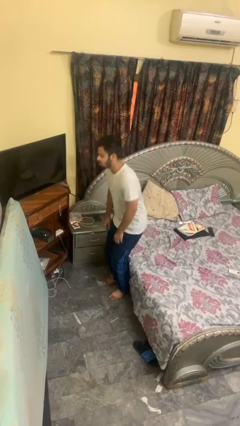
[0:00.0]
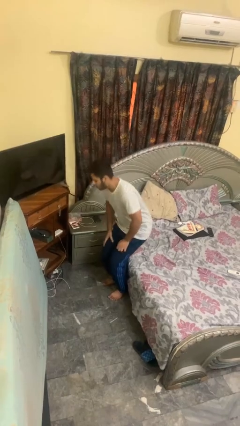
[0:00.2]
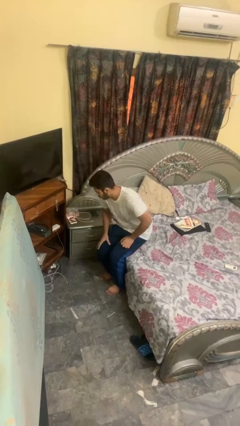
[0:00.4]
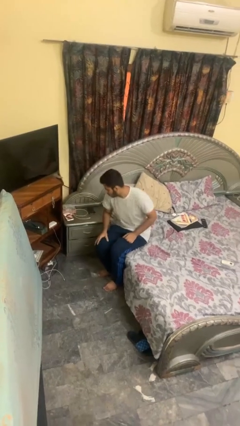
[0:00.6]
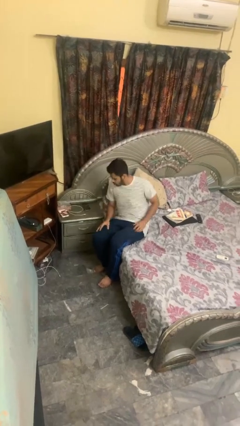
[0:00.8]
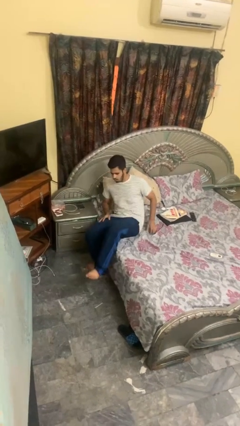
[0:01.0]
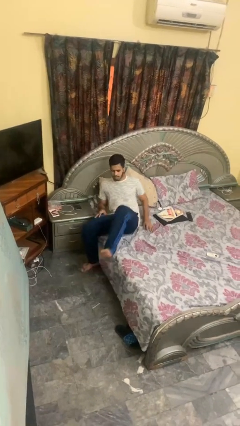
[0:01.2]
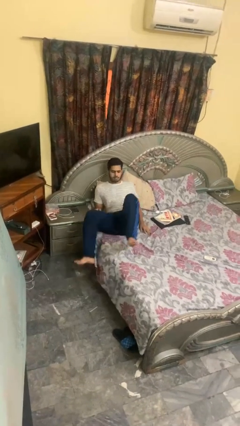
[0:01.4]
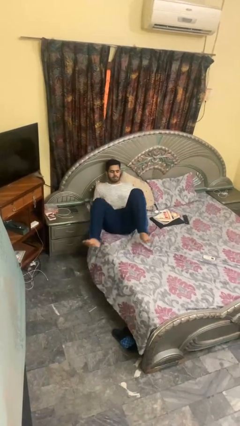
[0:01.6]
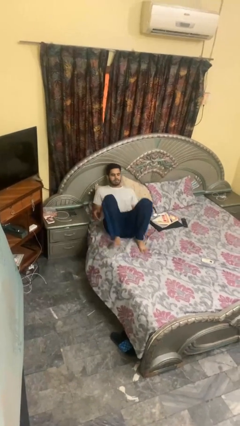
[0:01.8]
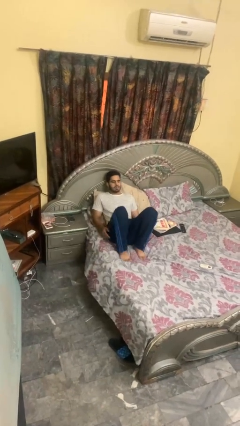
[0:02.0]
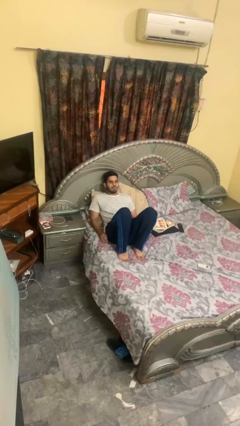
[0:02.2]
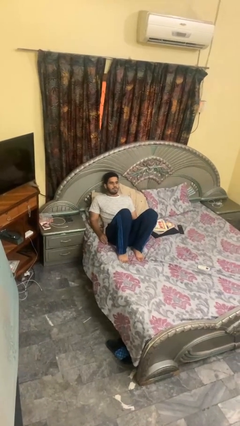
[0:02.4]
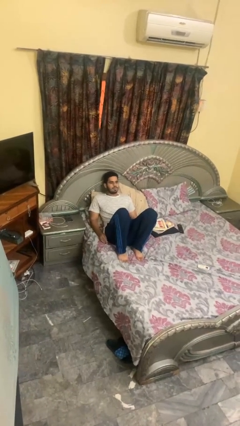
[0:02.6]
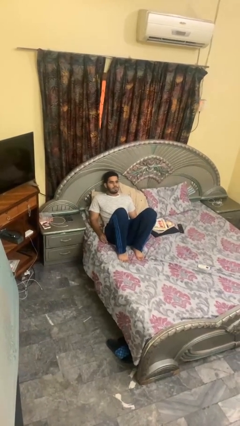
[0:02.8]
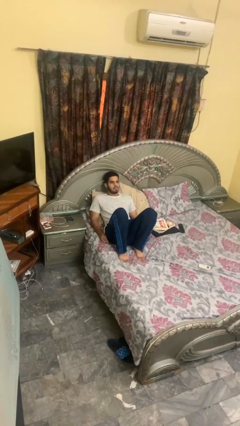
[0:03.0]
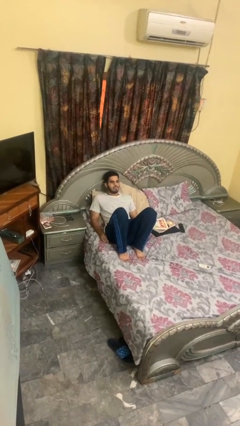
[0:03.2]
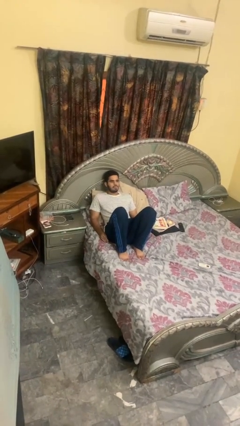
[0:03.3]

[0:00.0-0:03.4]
person lies down on bed

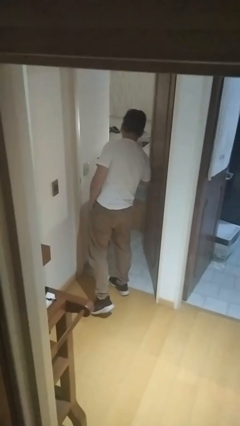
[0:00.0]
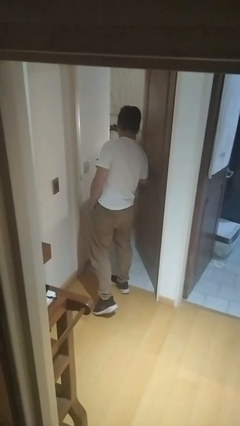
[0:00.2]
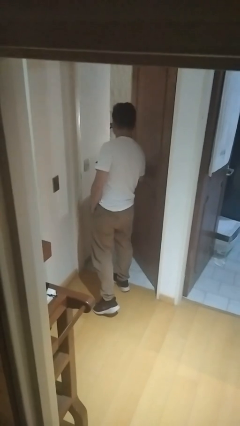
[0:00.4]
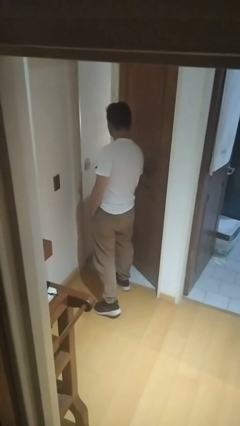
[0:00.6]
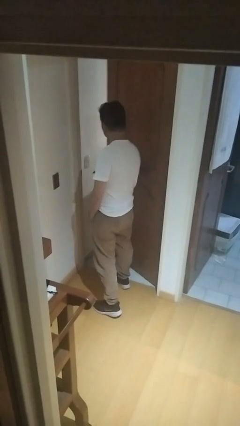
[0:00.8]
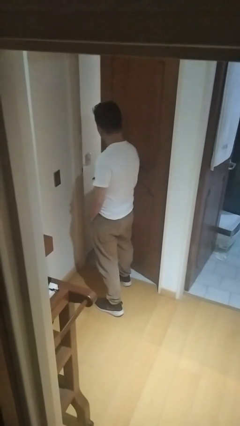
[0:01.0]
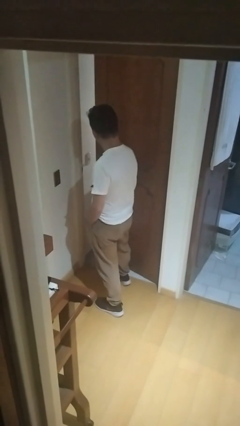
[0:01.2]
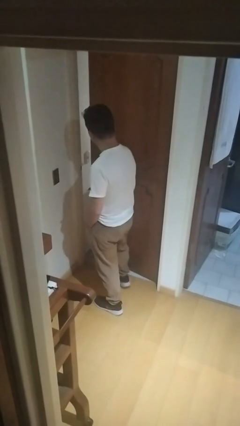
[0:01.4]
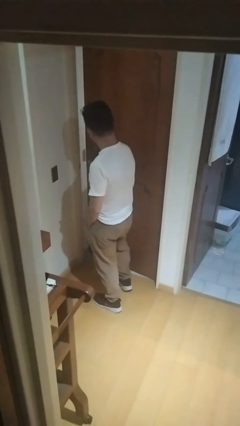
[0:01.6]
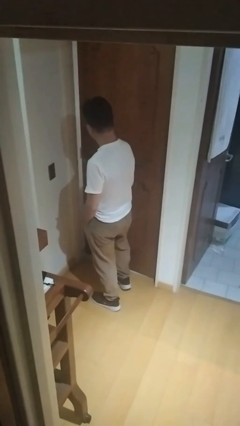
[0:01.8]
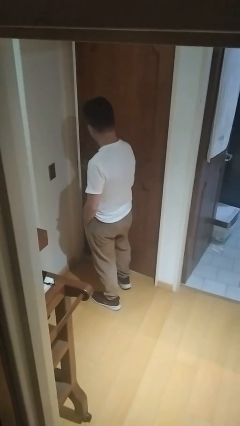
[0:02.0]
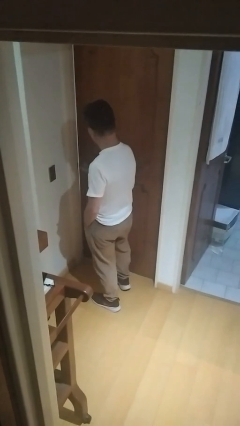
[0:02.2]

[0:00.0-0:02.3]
person closes facility door

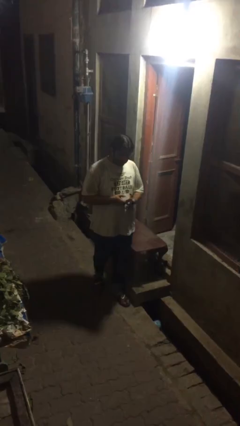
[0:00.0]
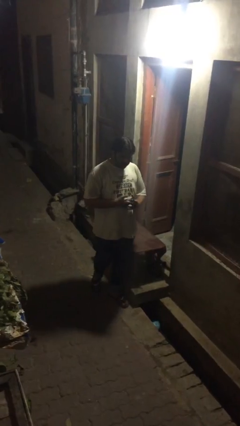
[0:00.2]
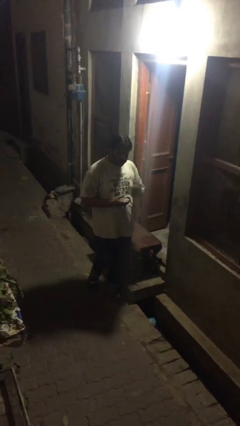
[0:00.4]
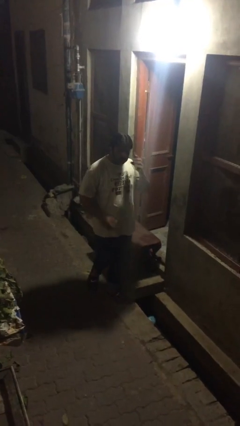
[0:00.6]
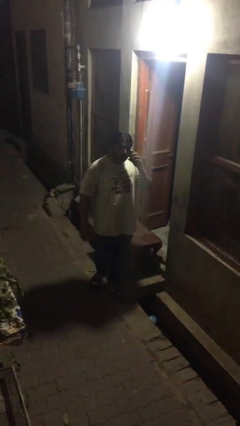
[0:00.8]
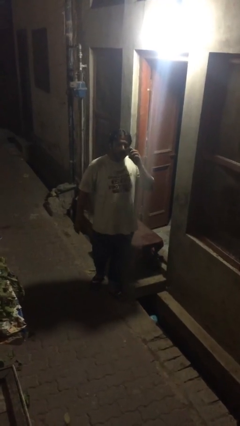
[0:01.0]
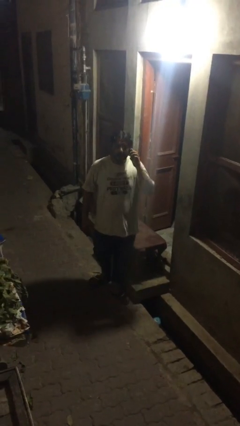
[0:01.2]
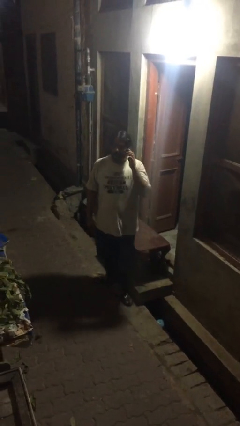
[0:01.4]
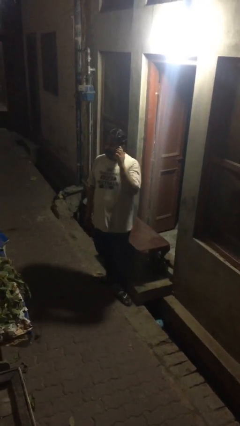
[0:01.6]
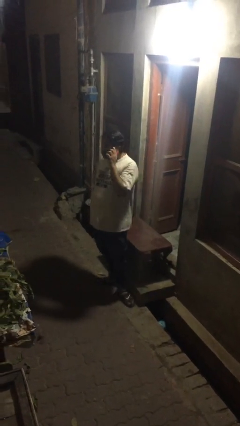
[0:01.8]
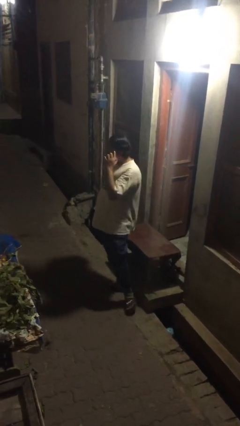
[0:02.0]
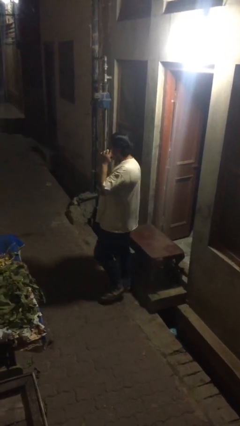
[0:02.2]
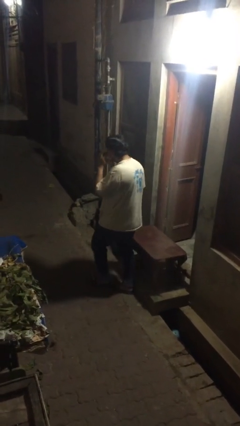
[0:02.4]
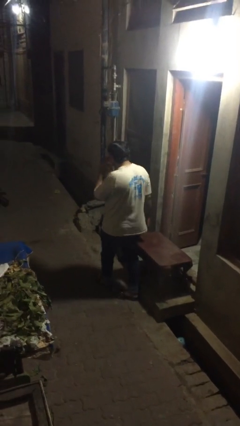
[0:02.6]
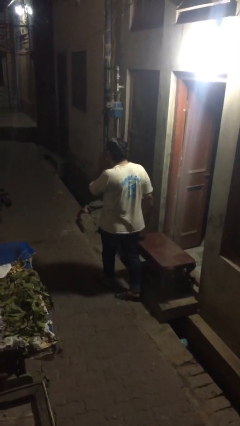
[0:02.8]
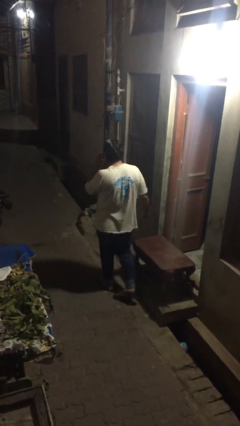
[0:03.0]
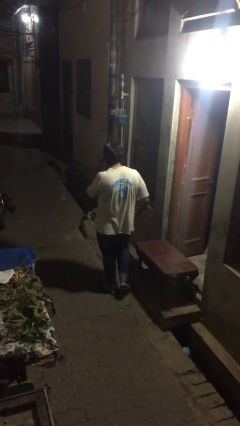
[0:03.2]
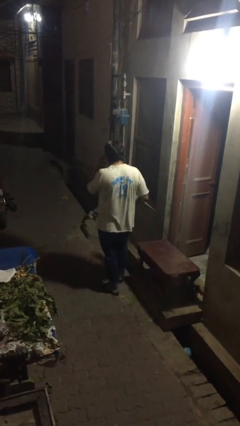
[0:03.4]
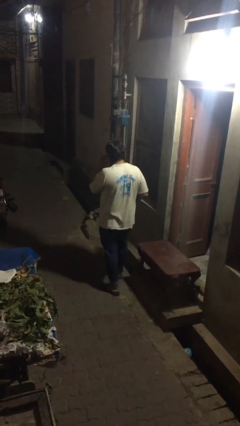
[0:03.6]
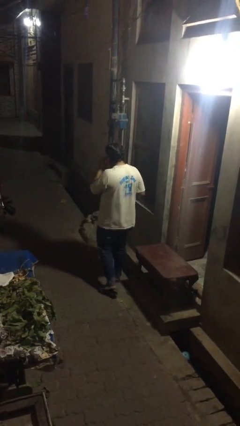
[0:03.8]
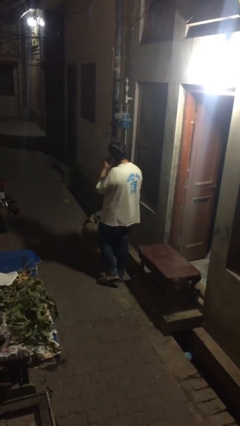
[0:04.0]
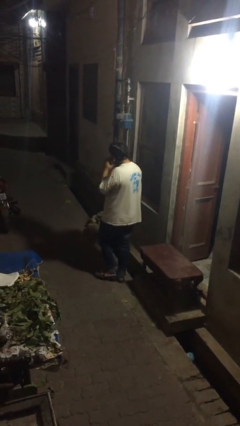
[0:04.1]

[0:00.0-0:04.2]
person talks on phone

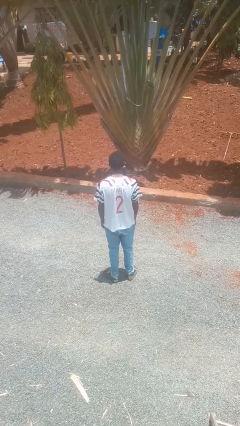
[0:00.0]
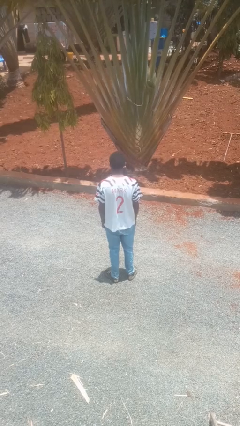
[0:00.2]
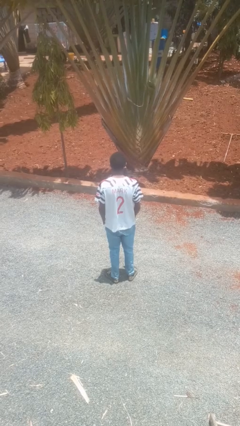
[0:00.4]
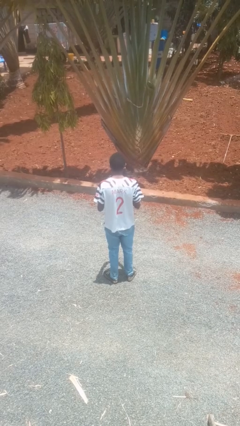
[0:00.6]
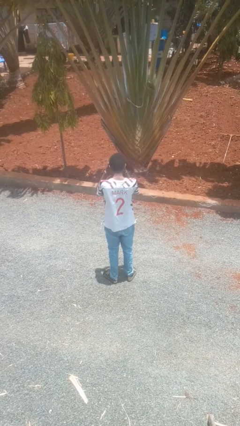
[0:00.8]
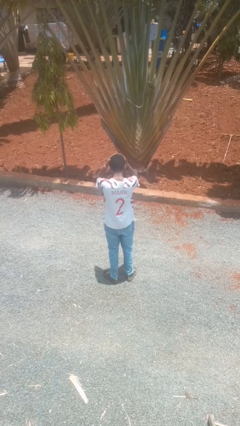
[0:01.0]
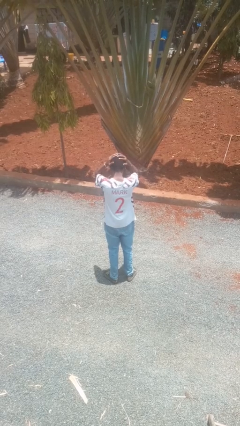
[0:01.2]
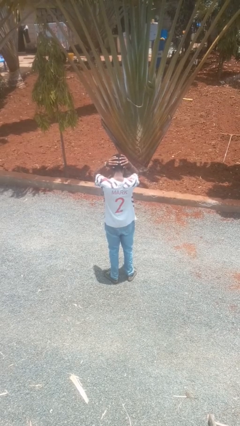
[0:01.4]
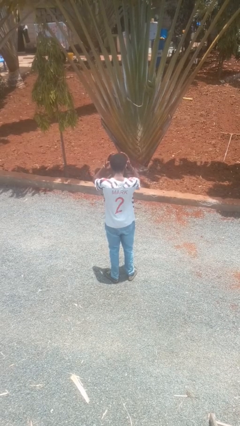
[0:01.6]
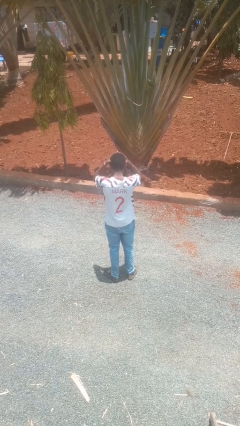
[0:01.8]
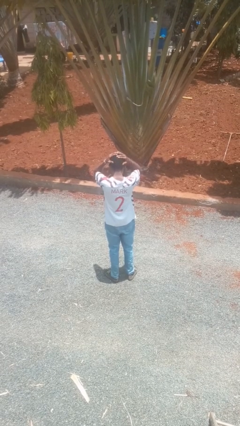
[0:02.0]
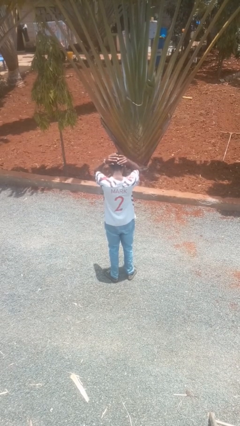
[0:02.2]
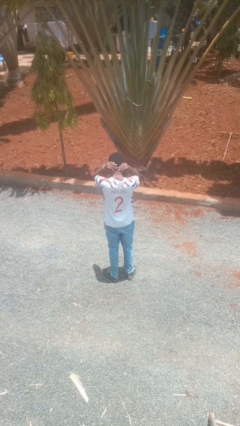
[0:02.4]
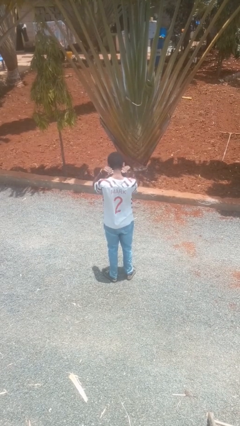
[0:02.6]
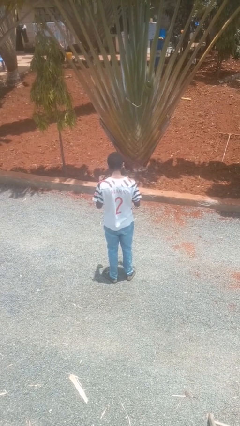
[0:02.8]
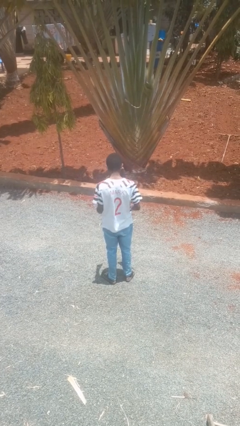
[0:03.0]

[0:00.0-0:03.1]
person strokes hair

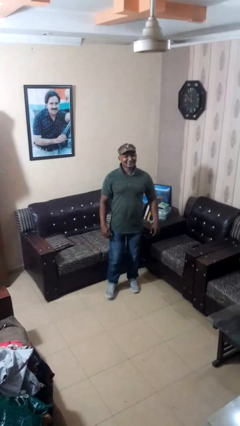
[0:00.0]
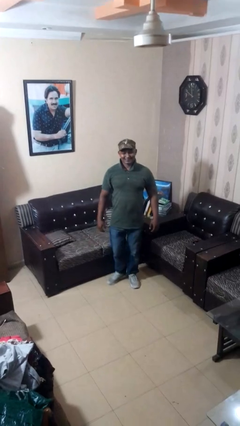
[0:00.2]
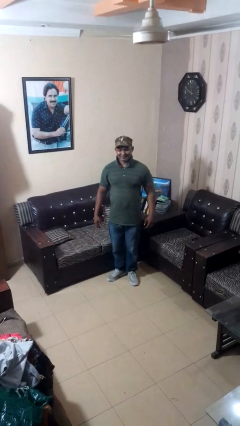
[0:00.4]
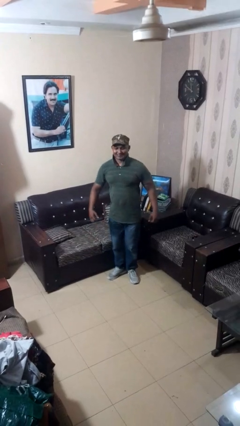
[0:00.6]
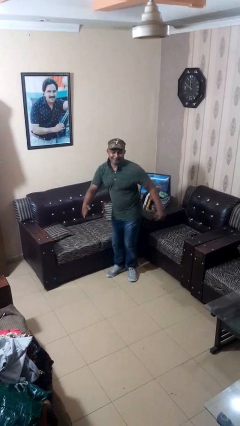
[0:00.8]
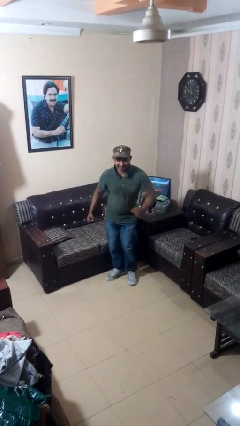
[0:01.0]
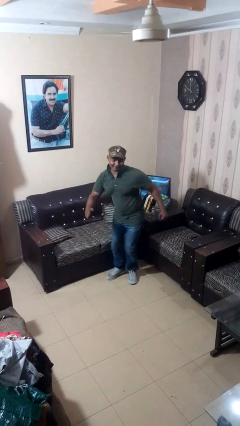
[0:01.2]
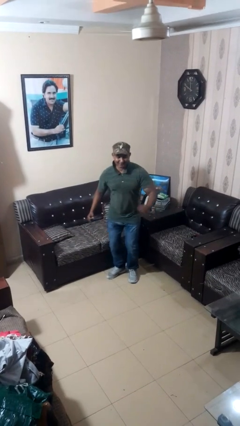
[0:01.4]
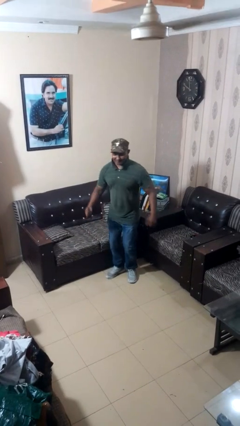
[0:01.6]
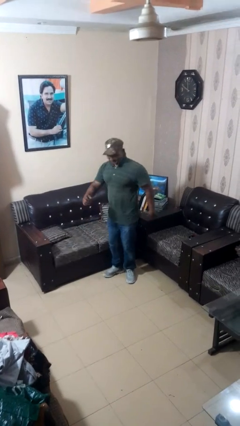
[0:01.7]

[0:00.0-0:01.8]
person wiggles hips

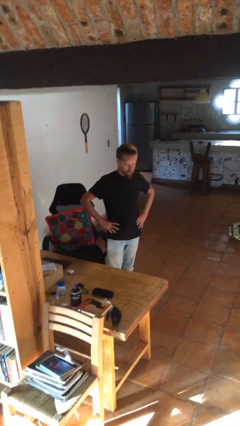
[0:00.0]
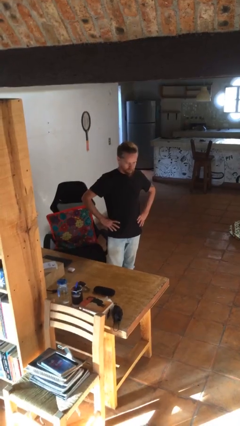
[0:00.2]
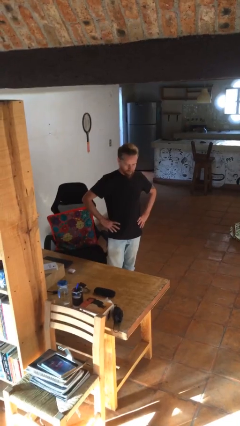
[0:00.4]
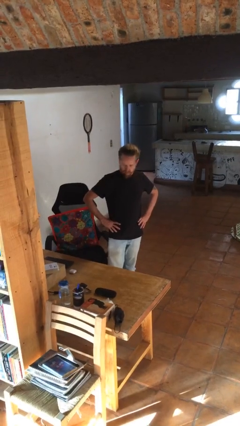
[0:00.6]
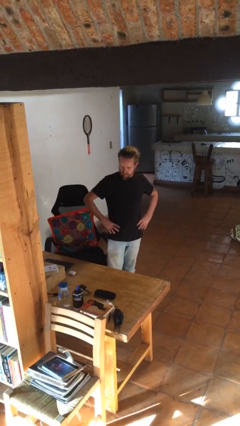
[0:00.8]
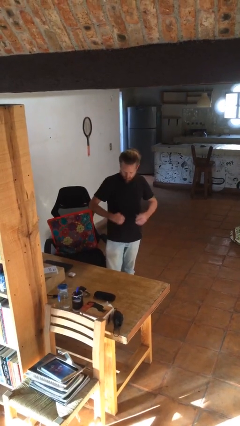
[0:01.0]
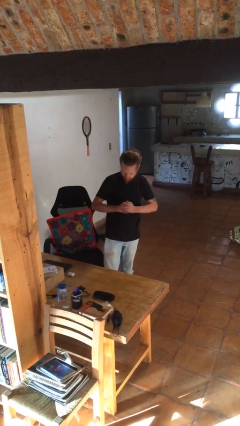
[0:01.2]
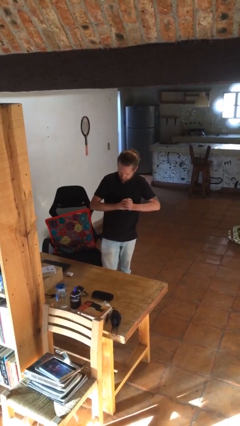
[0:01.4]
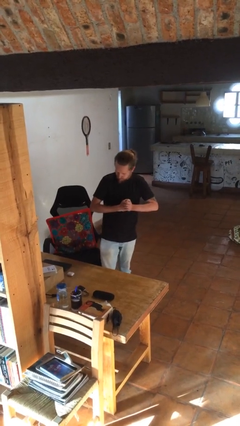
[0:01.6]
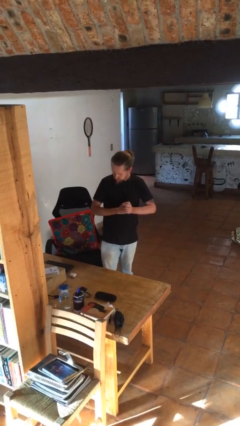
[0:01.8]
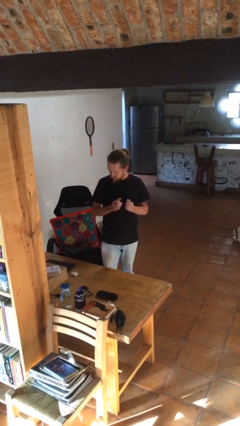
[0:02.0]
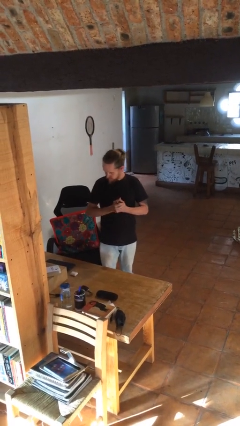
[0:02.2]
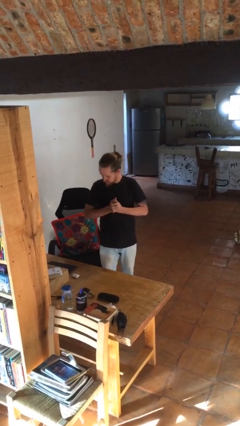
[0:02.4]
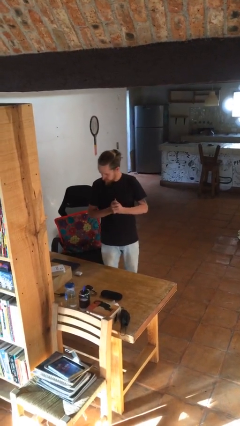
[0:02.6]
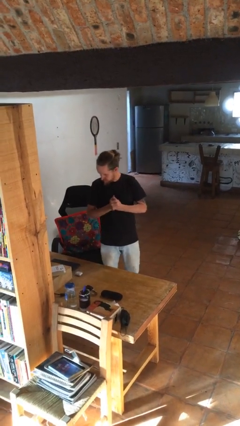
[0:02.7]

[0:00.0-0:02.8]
person cracks knuckles
